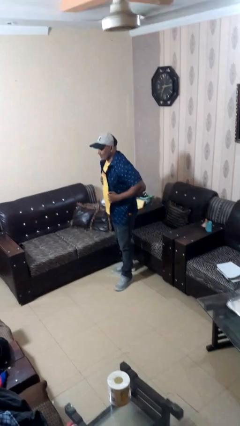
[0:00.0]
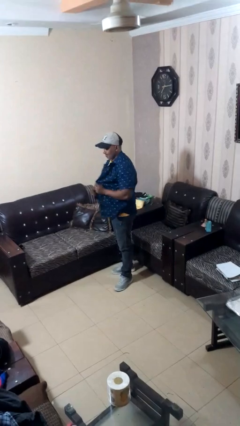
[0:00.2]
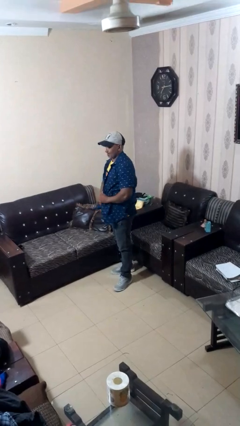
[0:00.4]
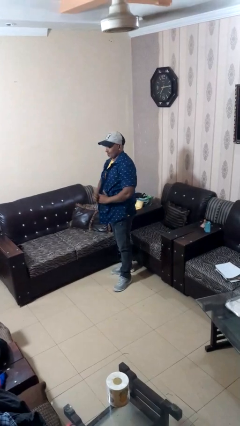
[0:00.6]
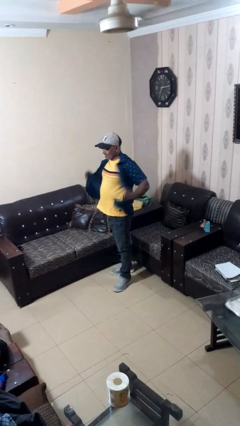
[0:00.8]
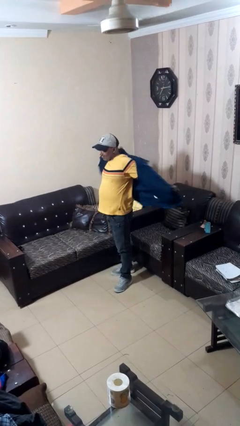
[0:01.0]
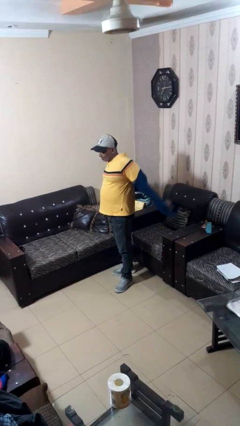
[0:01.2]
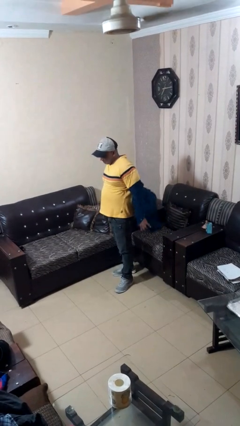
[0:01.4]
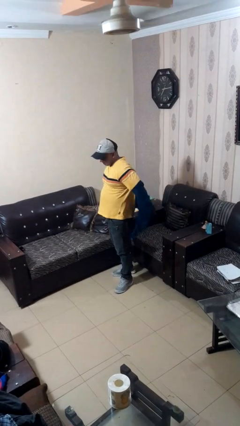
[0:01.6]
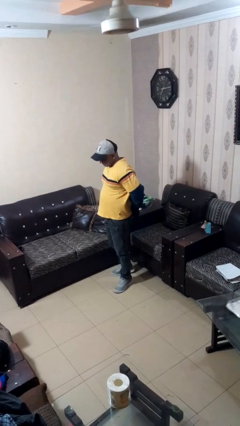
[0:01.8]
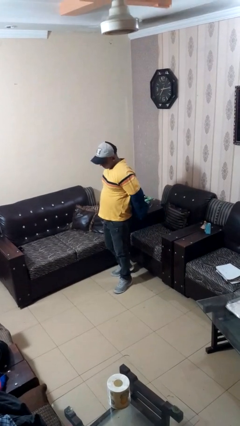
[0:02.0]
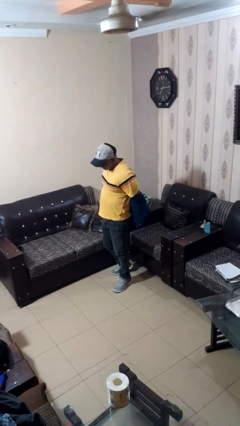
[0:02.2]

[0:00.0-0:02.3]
person takes off shirt

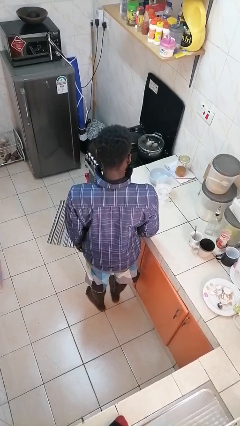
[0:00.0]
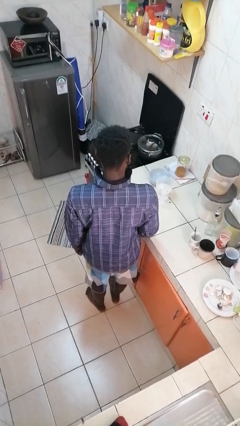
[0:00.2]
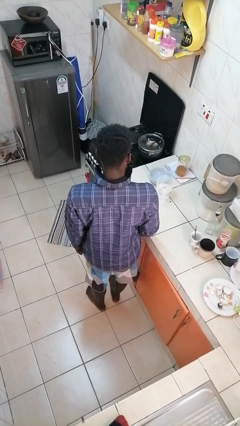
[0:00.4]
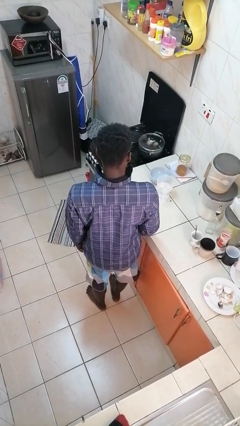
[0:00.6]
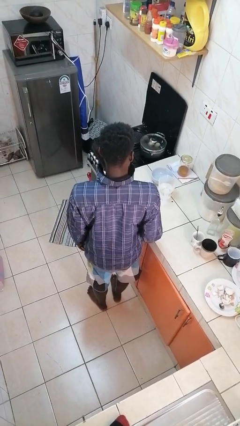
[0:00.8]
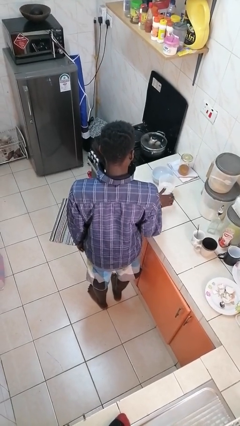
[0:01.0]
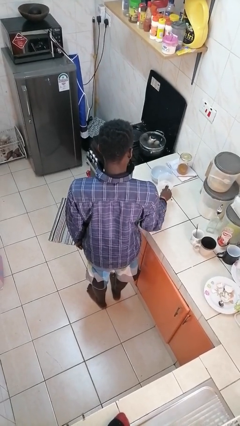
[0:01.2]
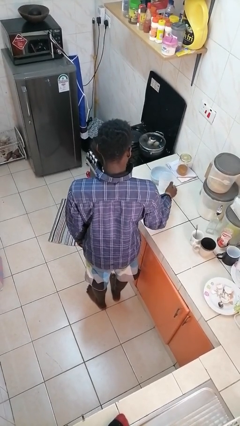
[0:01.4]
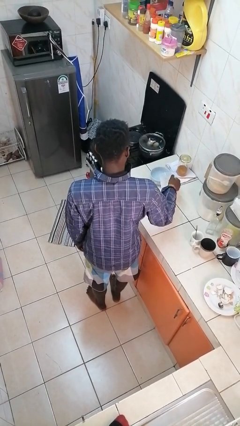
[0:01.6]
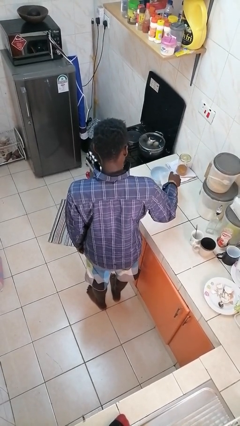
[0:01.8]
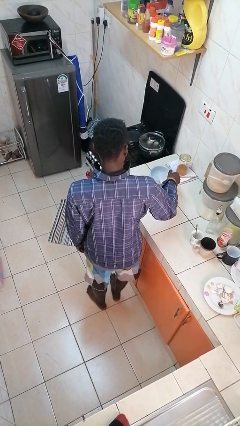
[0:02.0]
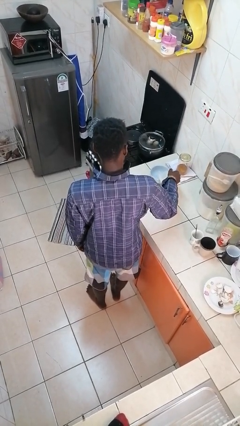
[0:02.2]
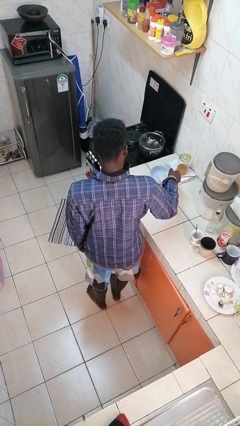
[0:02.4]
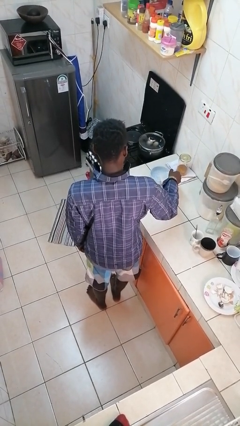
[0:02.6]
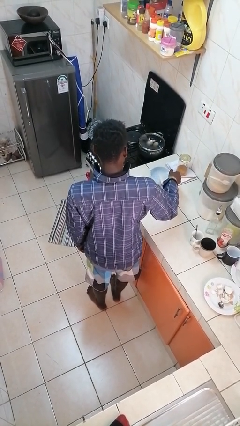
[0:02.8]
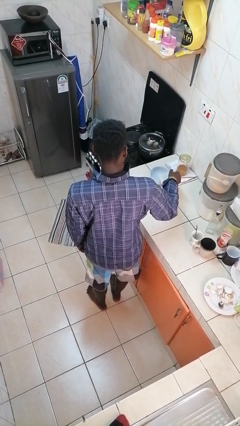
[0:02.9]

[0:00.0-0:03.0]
person pours into bowl

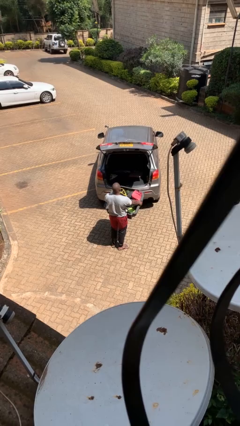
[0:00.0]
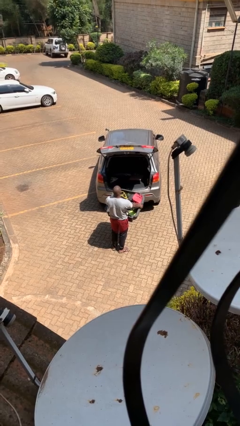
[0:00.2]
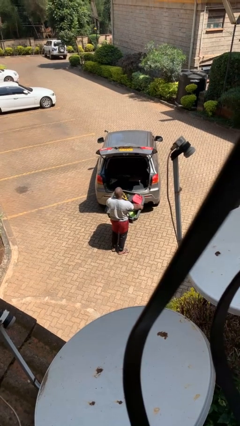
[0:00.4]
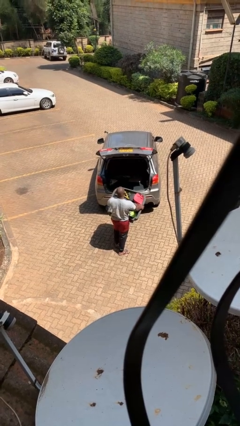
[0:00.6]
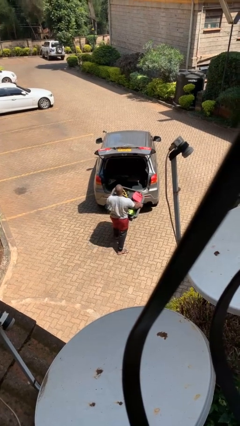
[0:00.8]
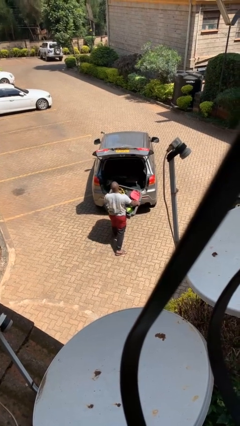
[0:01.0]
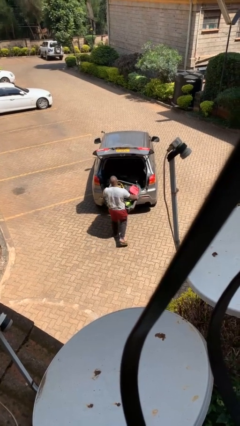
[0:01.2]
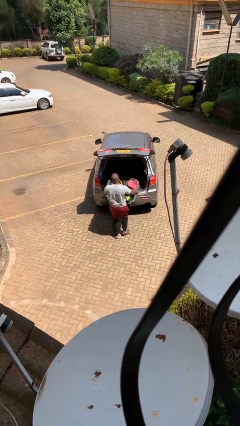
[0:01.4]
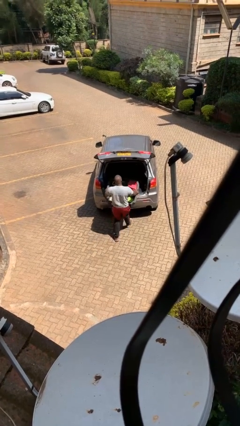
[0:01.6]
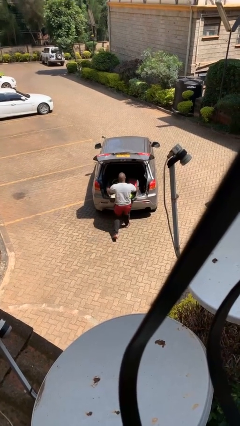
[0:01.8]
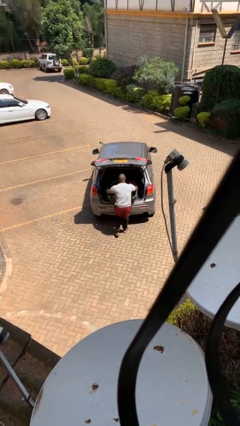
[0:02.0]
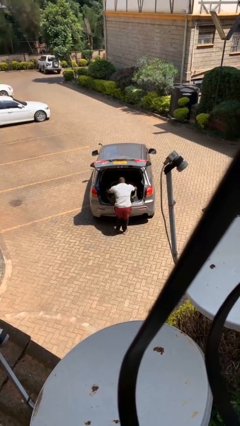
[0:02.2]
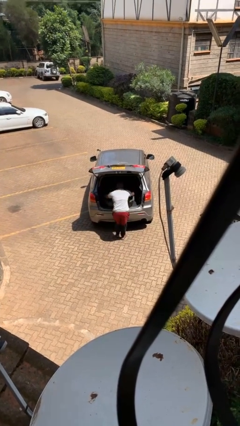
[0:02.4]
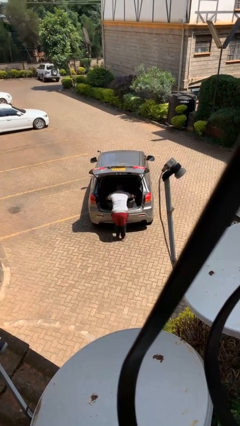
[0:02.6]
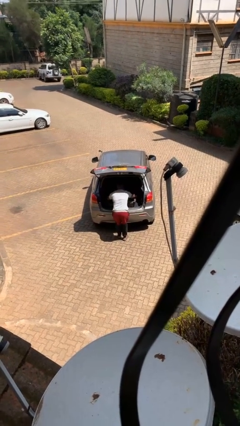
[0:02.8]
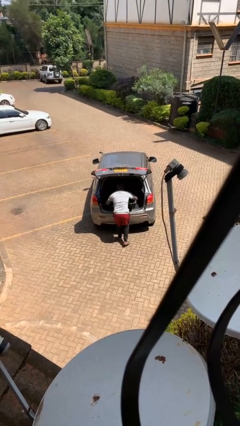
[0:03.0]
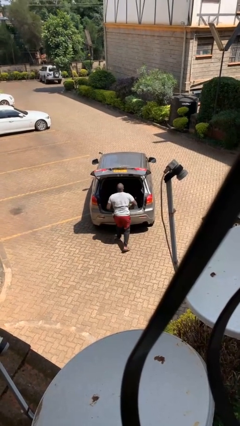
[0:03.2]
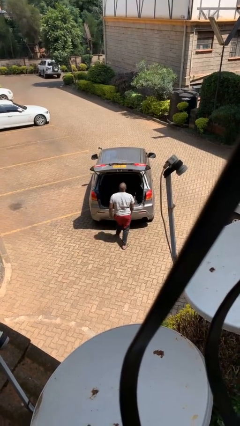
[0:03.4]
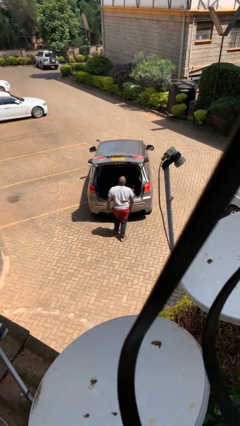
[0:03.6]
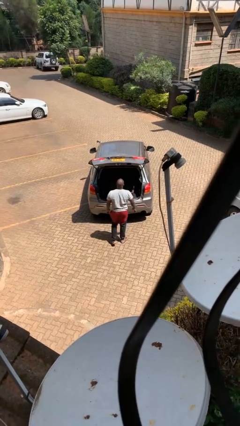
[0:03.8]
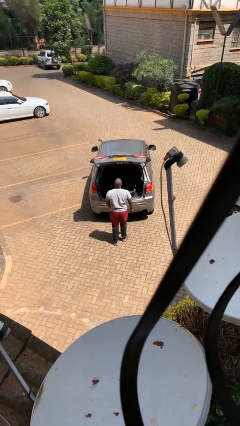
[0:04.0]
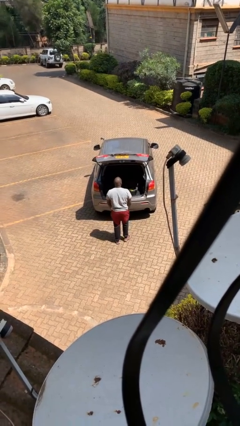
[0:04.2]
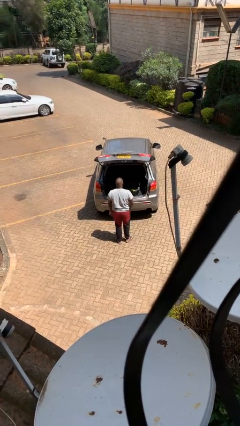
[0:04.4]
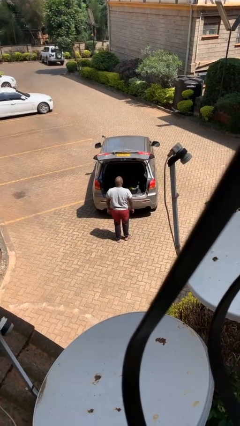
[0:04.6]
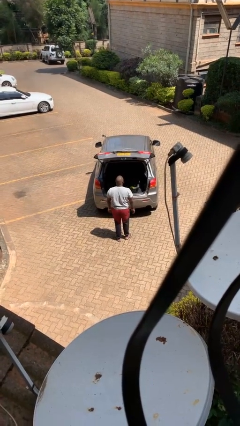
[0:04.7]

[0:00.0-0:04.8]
person loads car

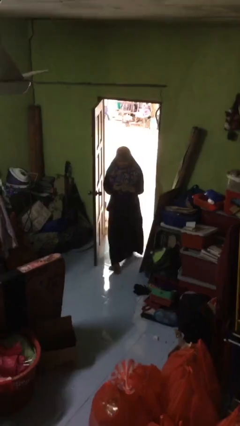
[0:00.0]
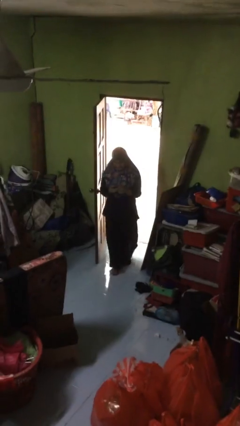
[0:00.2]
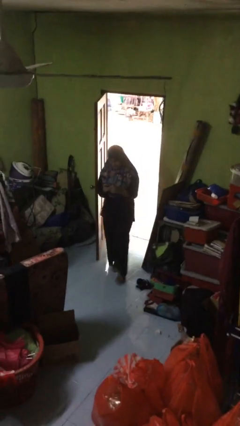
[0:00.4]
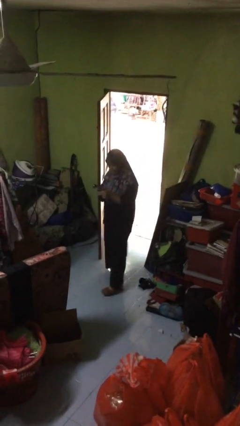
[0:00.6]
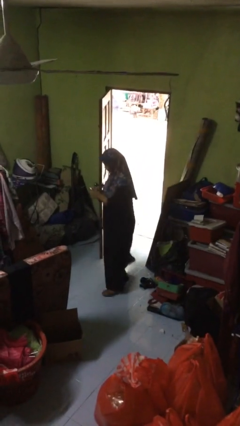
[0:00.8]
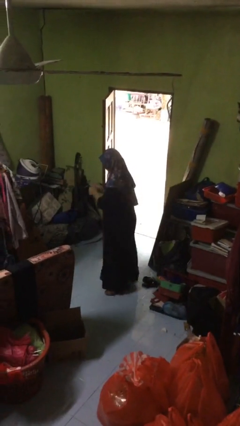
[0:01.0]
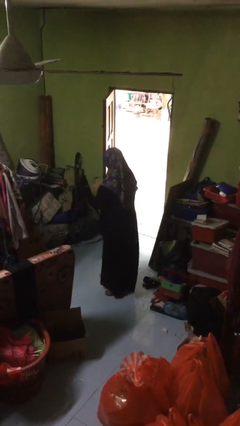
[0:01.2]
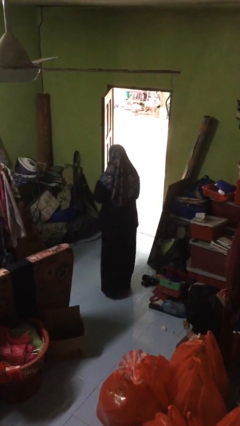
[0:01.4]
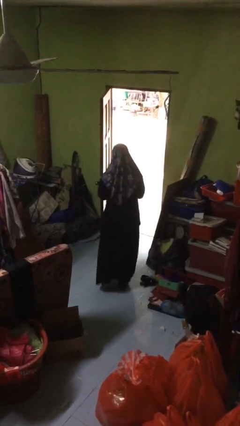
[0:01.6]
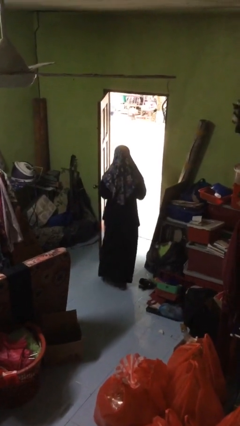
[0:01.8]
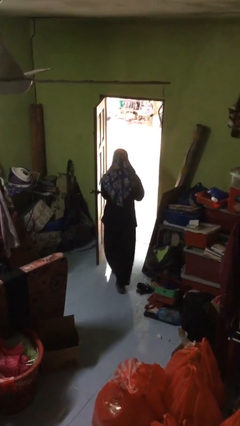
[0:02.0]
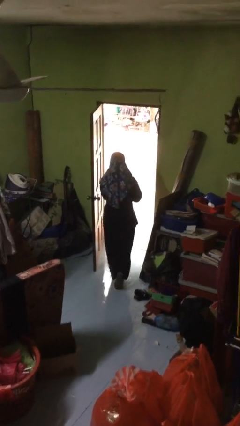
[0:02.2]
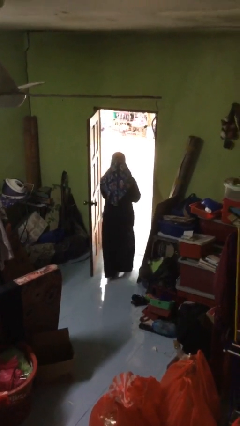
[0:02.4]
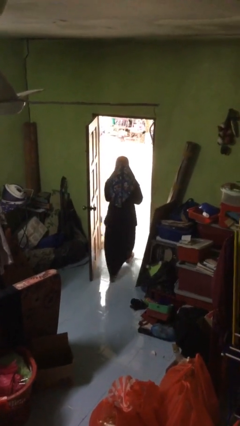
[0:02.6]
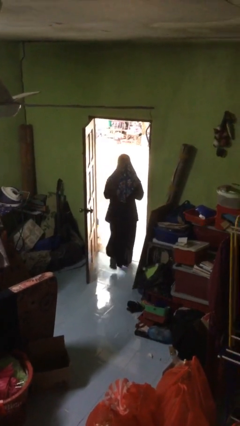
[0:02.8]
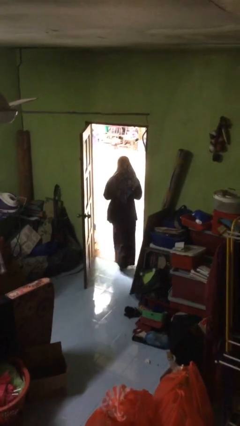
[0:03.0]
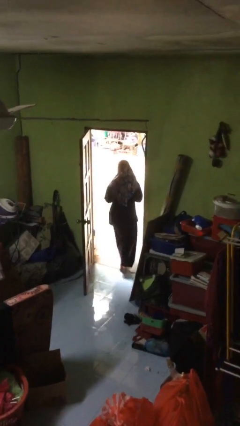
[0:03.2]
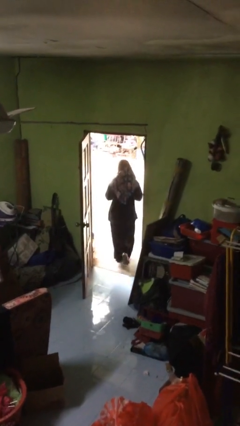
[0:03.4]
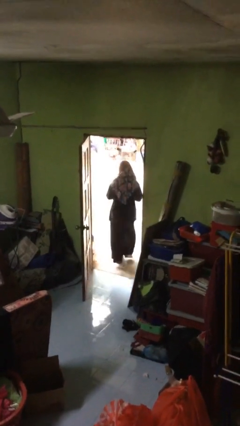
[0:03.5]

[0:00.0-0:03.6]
person exits scene through structure

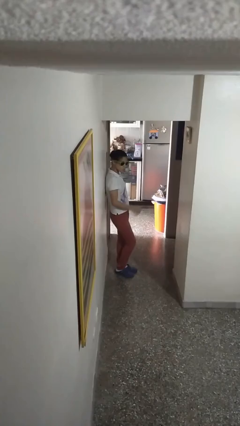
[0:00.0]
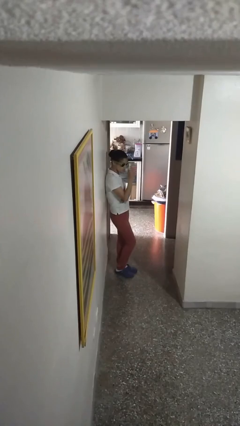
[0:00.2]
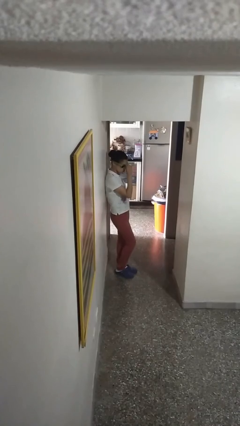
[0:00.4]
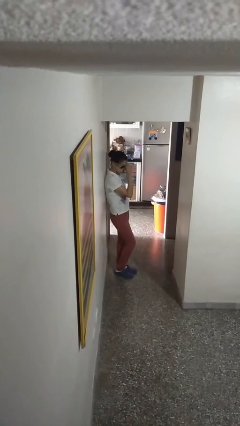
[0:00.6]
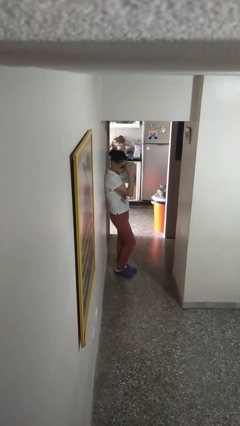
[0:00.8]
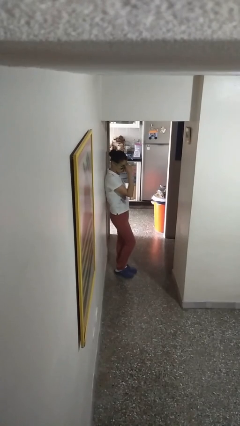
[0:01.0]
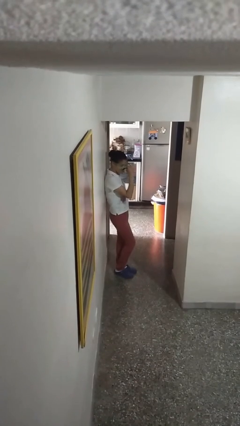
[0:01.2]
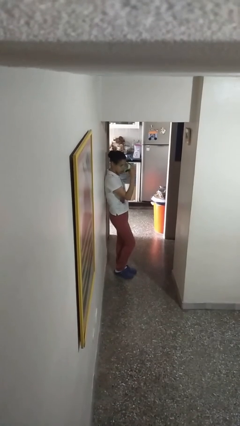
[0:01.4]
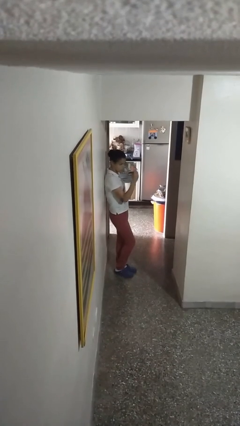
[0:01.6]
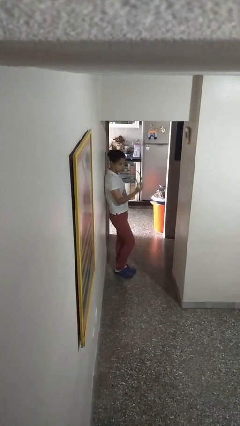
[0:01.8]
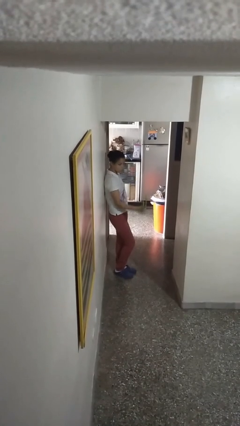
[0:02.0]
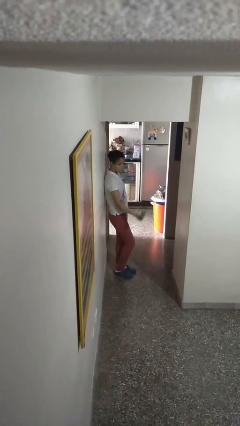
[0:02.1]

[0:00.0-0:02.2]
person takes off sunglasses

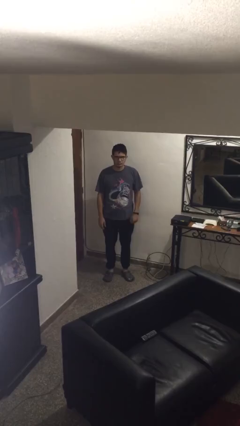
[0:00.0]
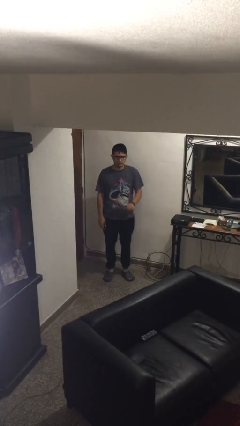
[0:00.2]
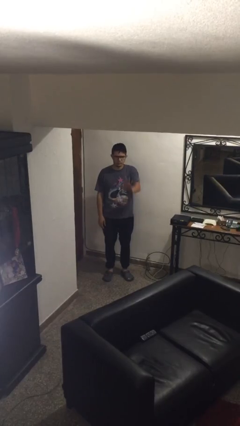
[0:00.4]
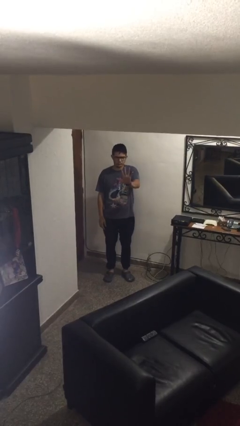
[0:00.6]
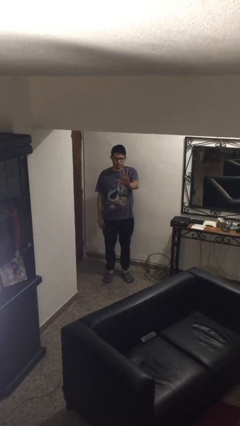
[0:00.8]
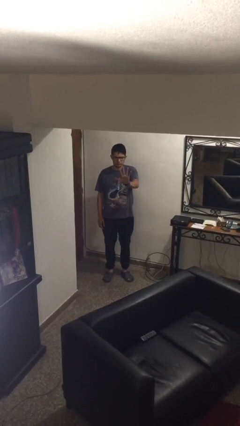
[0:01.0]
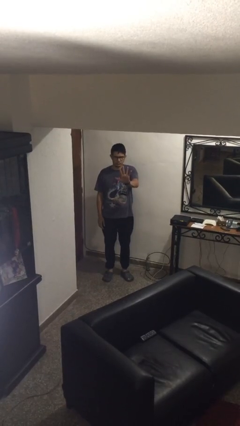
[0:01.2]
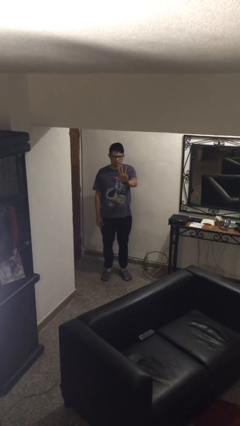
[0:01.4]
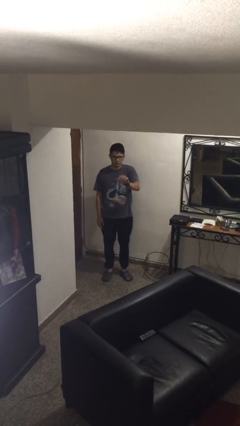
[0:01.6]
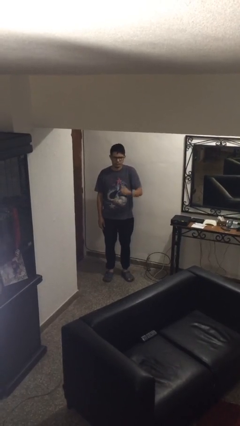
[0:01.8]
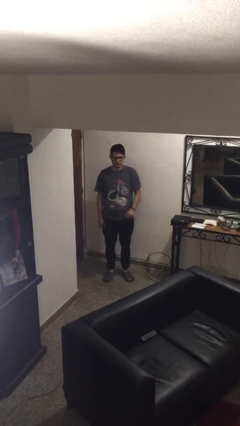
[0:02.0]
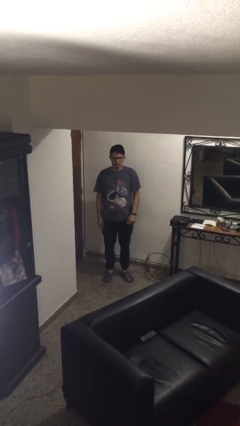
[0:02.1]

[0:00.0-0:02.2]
person gestures number five
